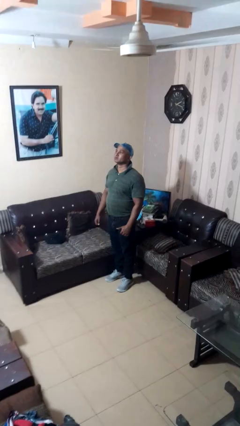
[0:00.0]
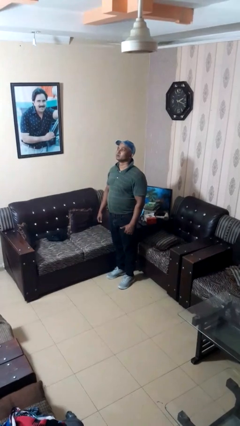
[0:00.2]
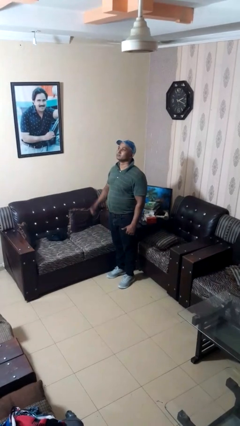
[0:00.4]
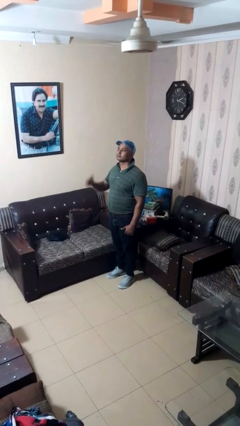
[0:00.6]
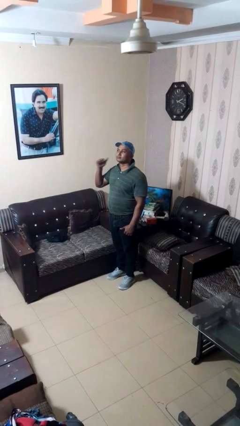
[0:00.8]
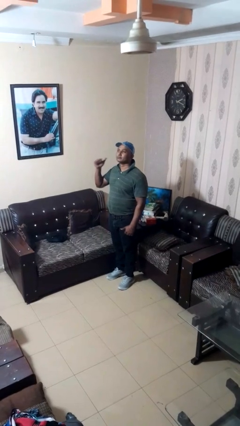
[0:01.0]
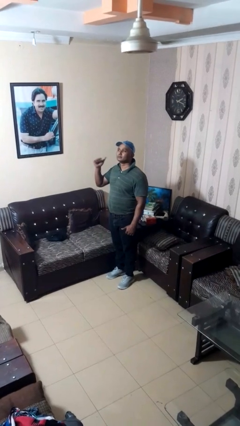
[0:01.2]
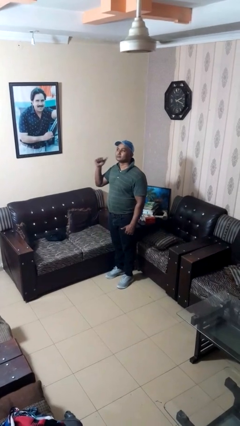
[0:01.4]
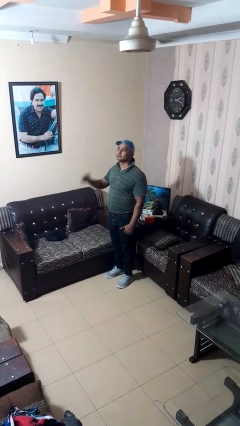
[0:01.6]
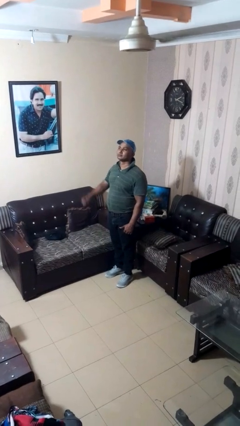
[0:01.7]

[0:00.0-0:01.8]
person gestures behind me

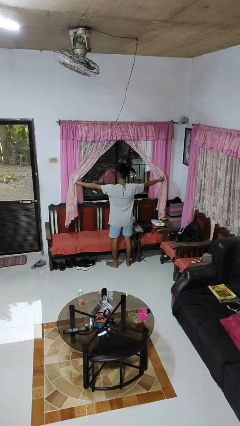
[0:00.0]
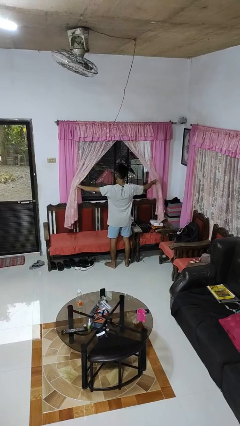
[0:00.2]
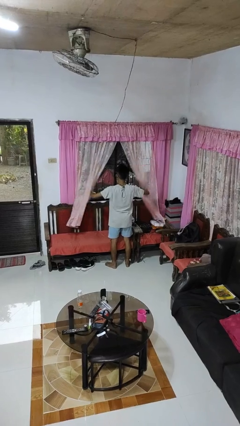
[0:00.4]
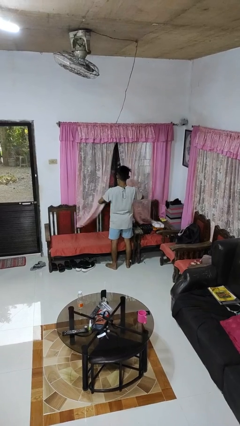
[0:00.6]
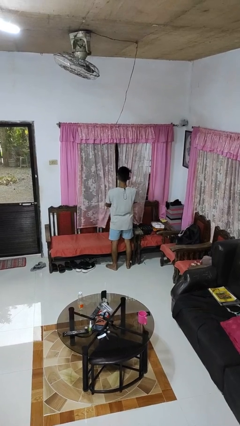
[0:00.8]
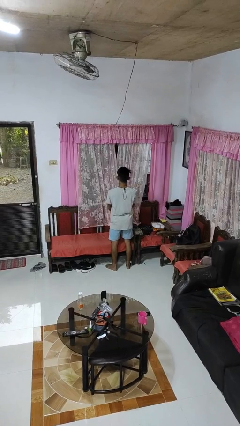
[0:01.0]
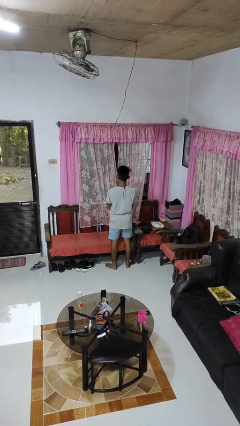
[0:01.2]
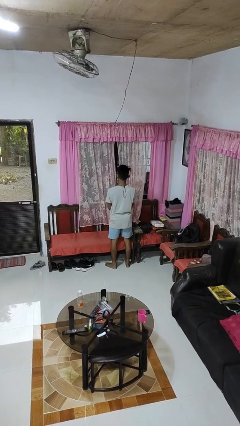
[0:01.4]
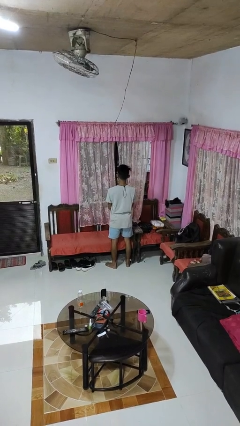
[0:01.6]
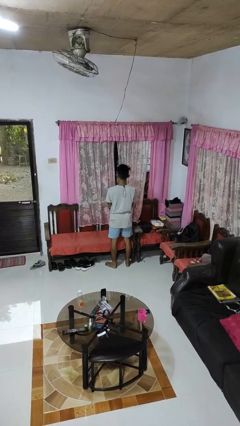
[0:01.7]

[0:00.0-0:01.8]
person closes curtains

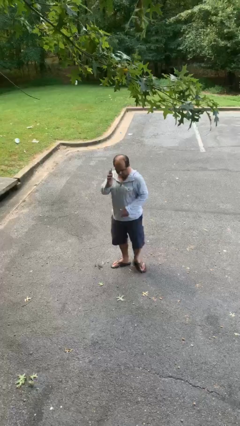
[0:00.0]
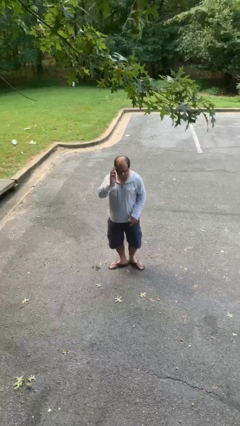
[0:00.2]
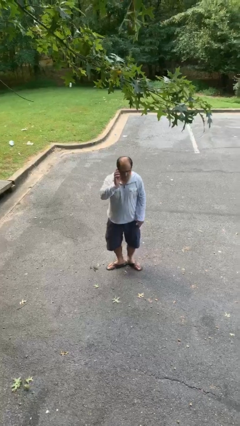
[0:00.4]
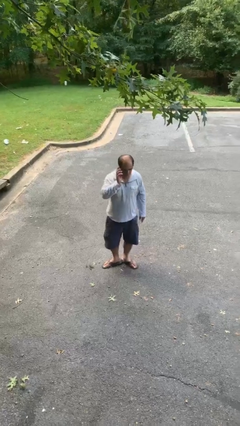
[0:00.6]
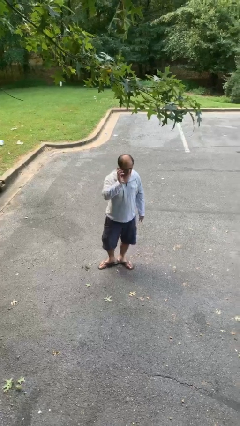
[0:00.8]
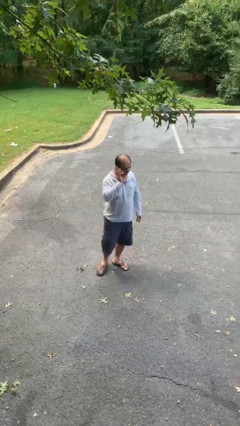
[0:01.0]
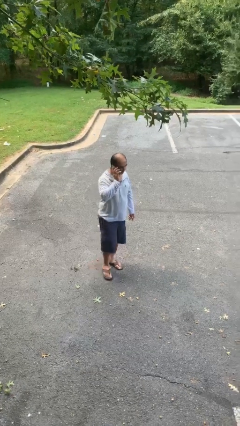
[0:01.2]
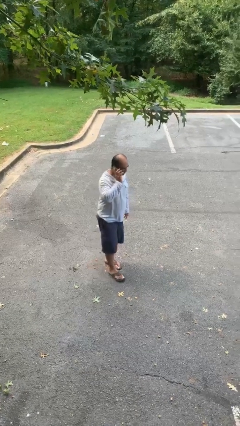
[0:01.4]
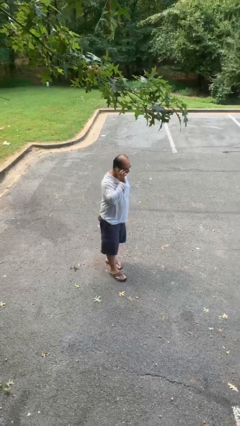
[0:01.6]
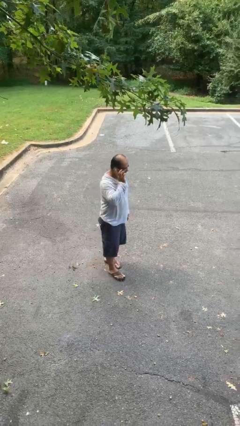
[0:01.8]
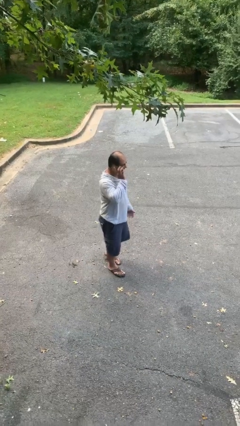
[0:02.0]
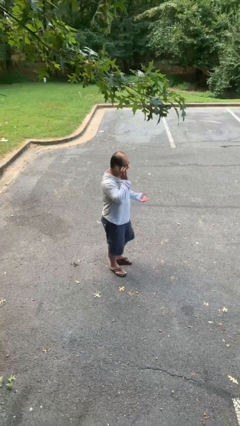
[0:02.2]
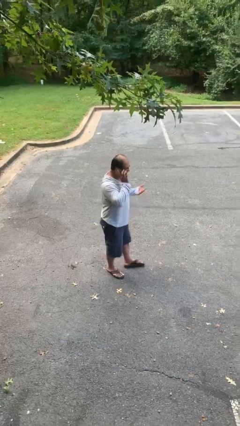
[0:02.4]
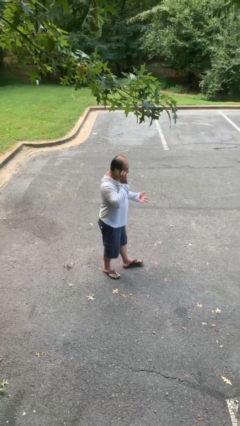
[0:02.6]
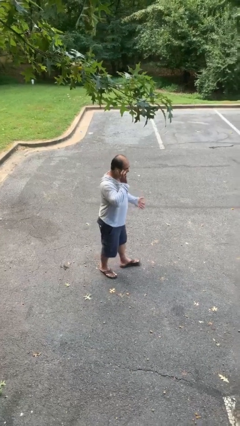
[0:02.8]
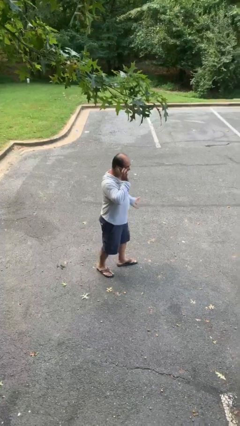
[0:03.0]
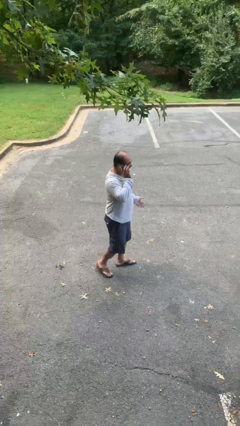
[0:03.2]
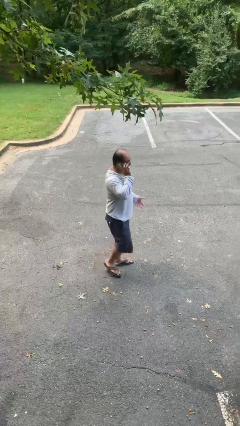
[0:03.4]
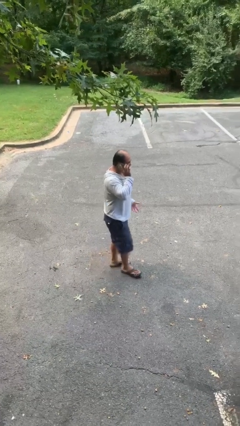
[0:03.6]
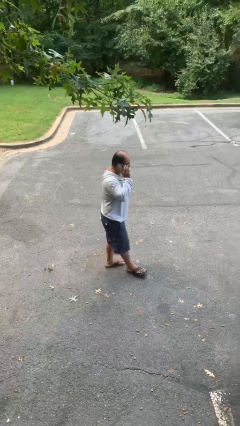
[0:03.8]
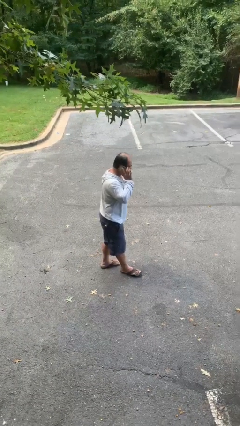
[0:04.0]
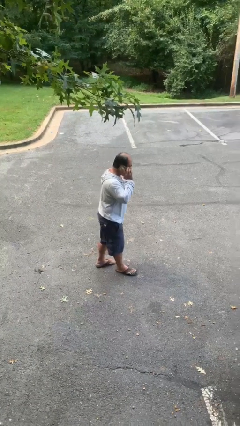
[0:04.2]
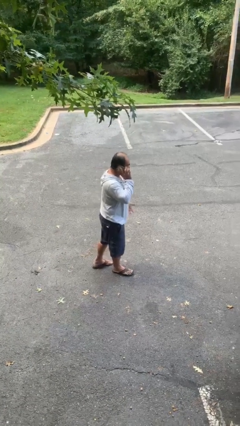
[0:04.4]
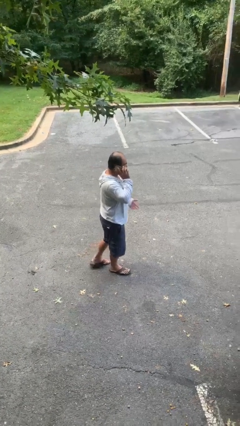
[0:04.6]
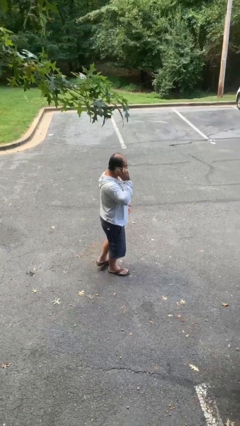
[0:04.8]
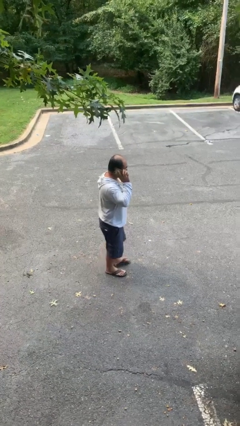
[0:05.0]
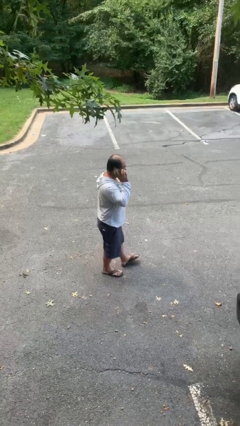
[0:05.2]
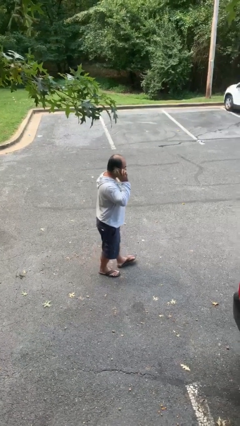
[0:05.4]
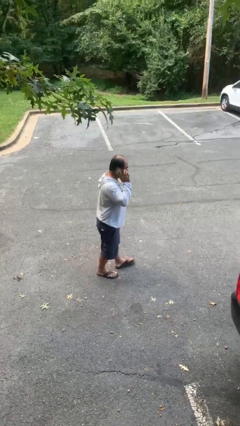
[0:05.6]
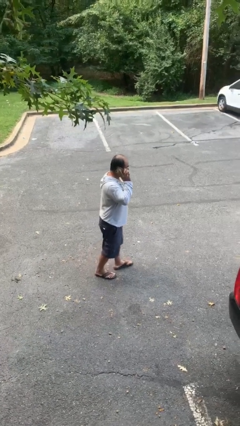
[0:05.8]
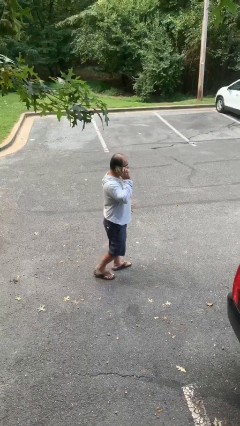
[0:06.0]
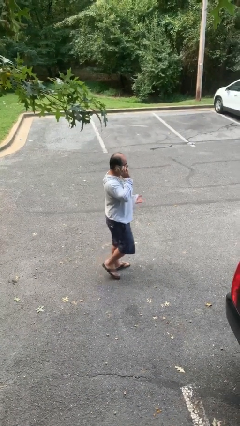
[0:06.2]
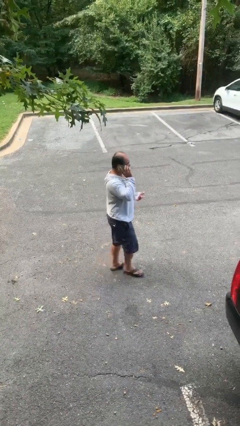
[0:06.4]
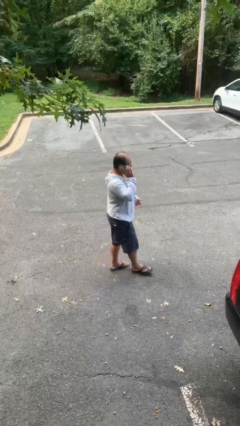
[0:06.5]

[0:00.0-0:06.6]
person talks on phone

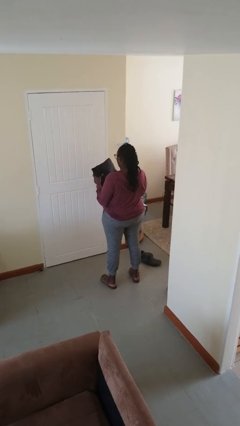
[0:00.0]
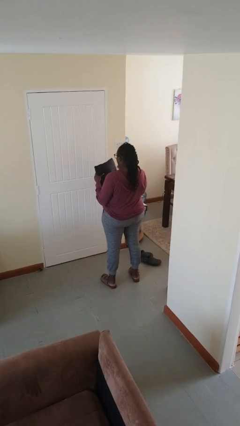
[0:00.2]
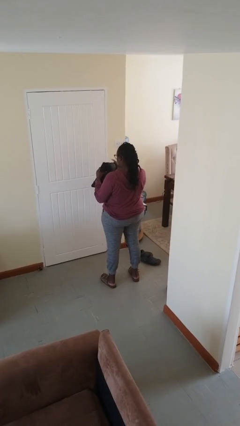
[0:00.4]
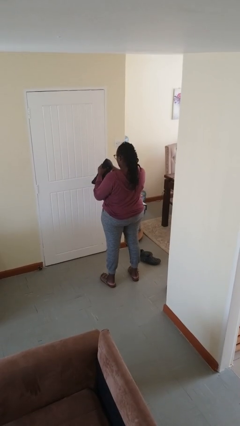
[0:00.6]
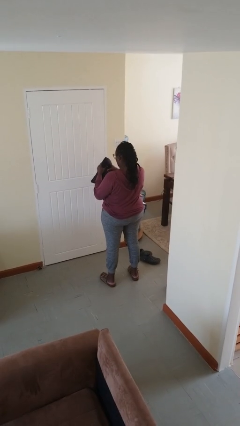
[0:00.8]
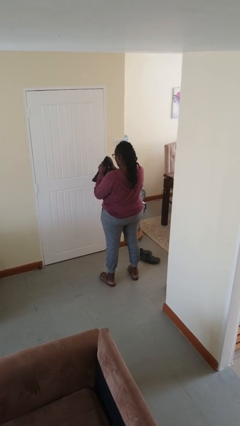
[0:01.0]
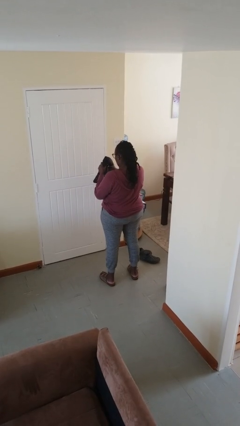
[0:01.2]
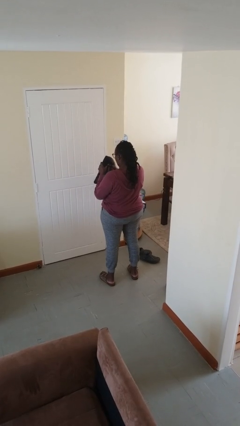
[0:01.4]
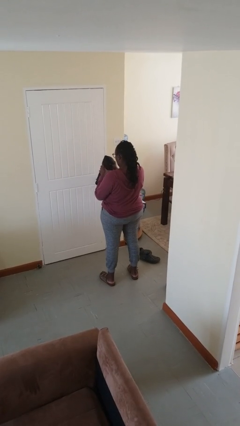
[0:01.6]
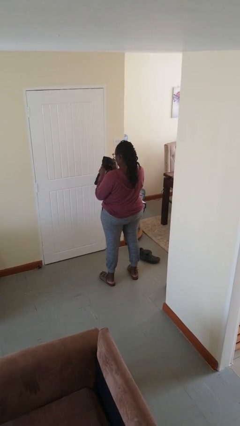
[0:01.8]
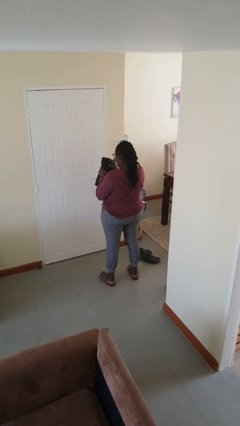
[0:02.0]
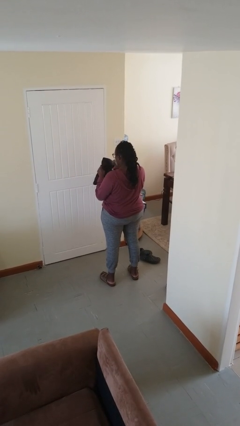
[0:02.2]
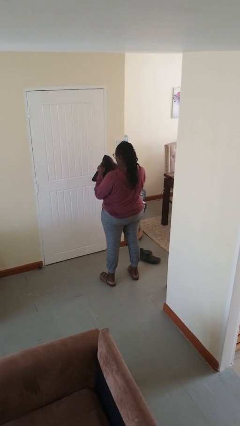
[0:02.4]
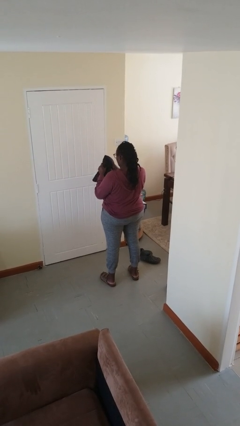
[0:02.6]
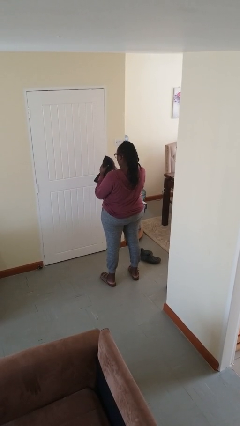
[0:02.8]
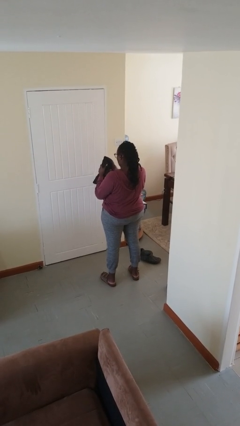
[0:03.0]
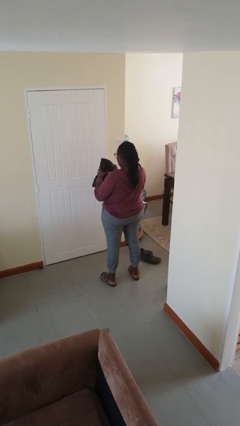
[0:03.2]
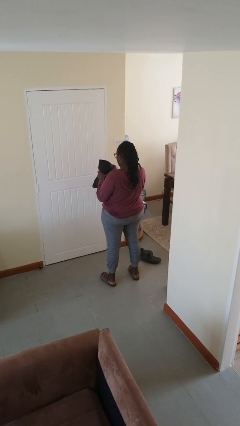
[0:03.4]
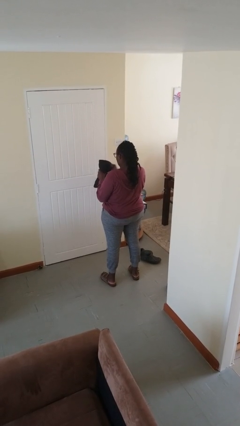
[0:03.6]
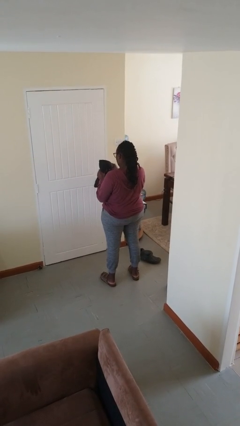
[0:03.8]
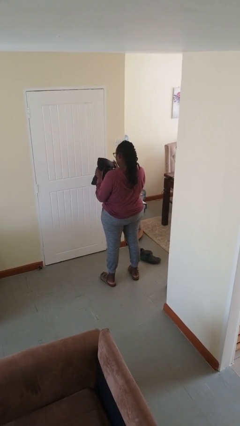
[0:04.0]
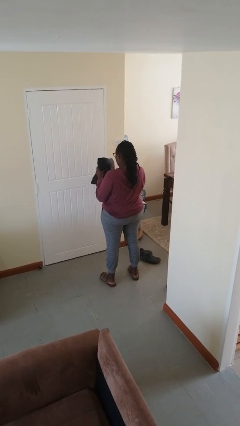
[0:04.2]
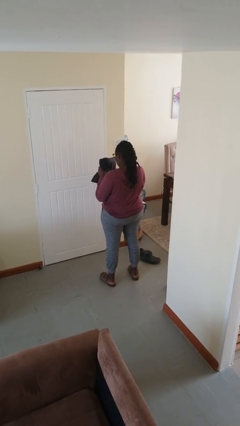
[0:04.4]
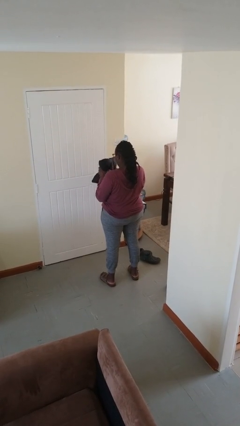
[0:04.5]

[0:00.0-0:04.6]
person squeezes object

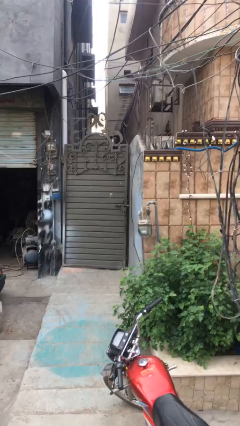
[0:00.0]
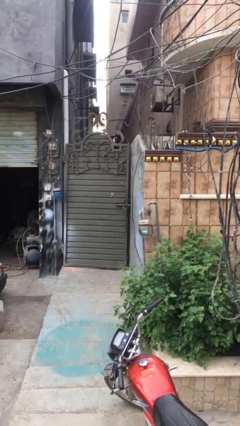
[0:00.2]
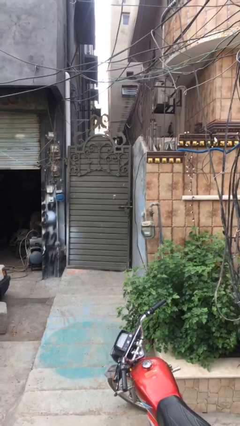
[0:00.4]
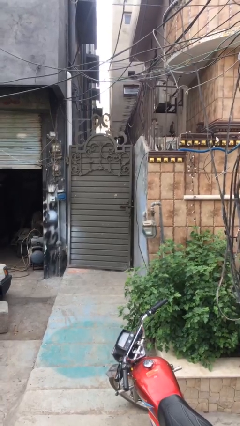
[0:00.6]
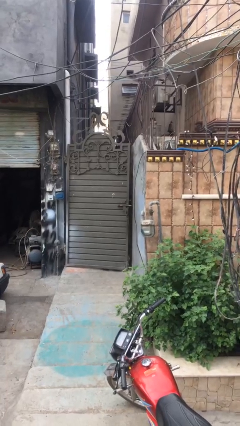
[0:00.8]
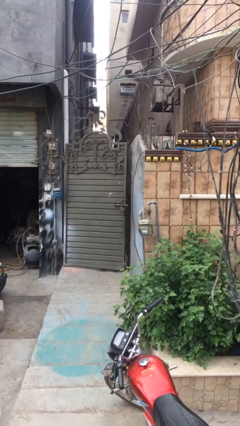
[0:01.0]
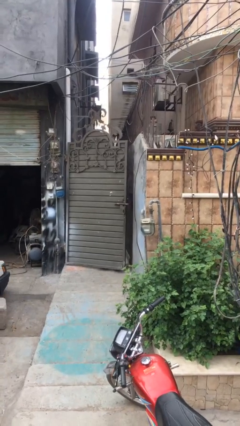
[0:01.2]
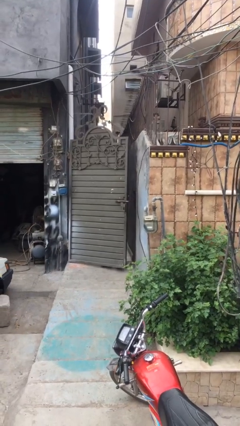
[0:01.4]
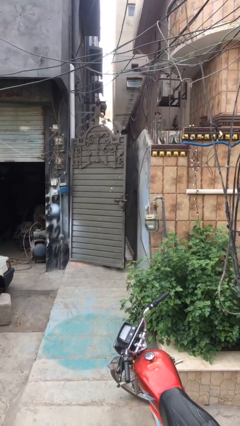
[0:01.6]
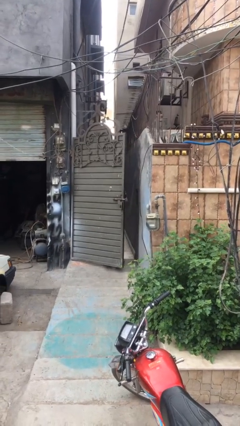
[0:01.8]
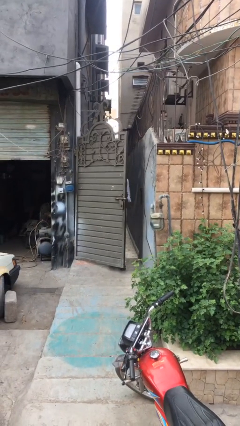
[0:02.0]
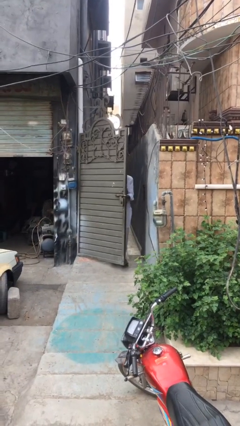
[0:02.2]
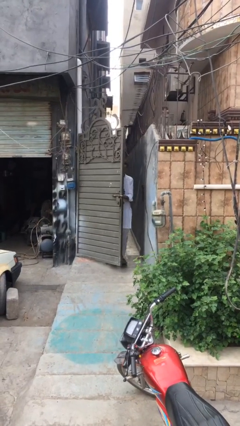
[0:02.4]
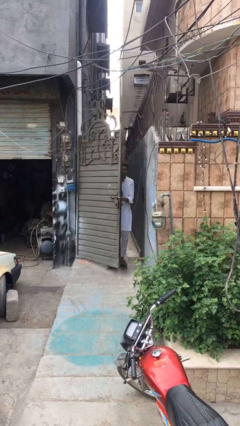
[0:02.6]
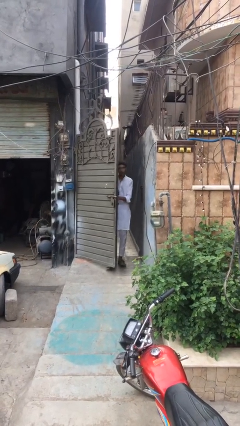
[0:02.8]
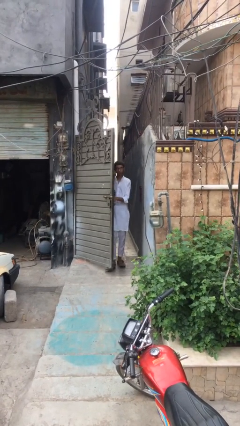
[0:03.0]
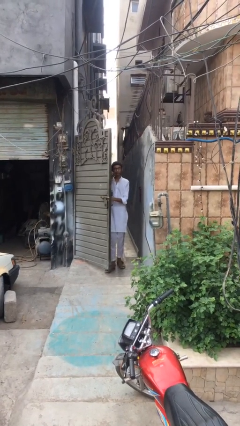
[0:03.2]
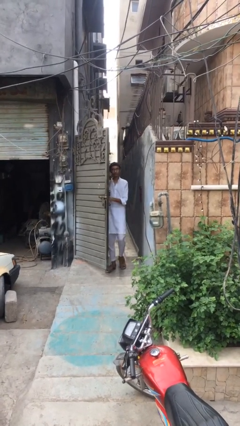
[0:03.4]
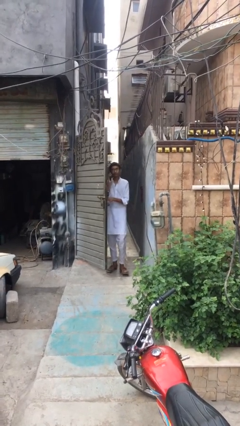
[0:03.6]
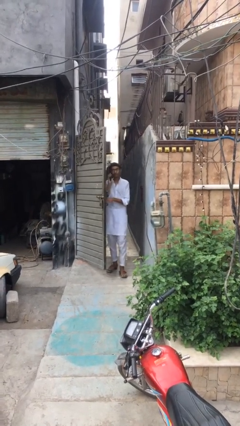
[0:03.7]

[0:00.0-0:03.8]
person opens facility door
